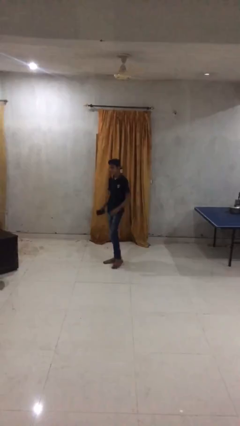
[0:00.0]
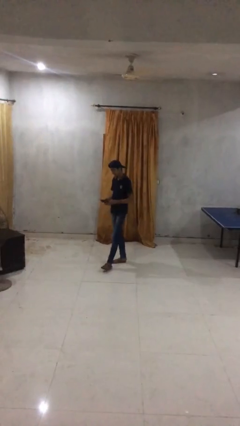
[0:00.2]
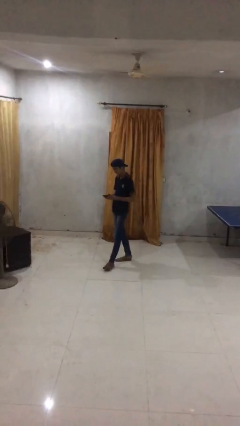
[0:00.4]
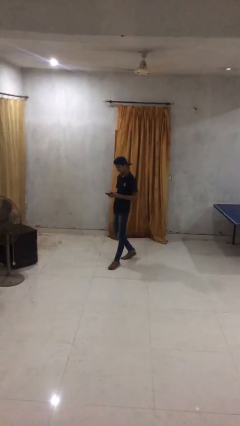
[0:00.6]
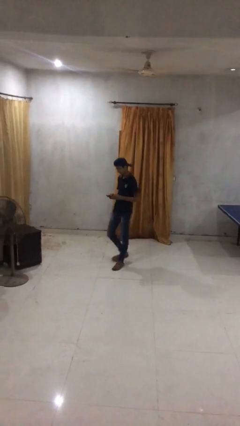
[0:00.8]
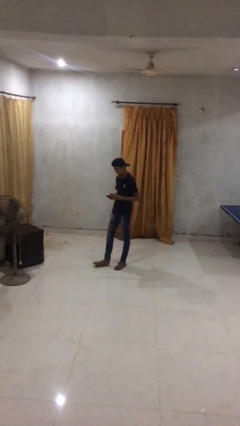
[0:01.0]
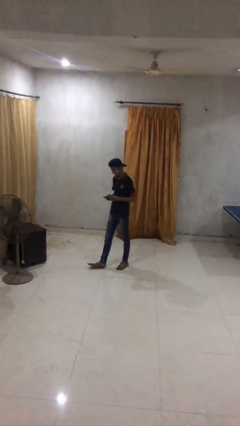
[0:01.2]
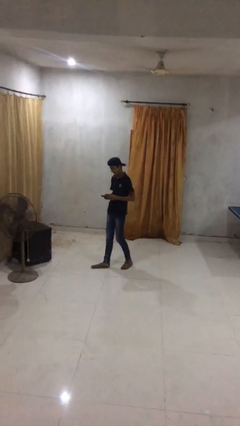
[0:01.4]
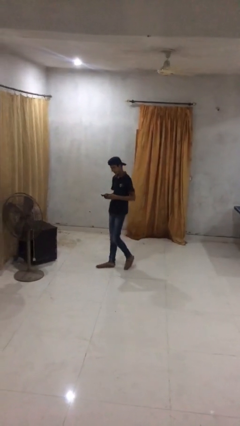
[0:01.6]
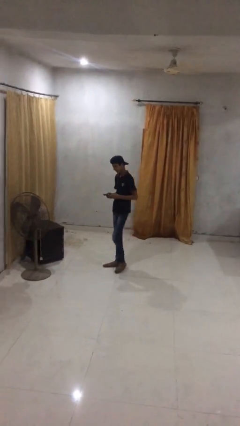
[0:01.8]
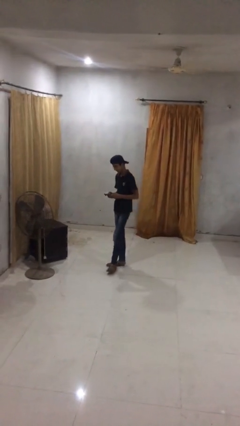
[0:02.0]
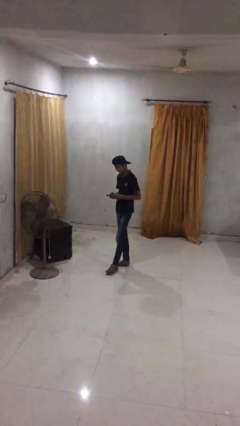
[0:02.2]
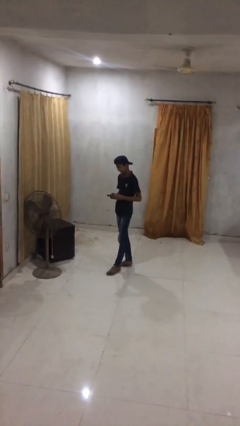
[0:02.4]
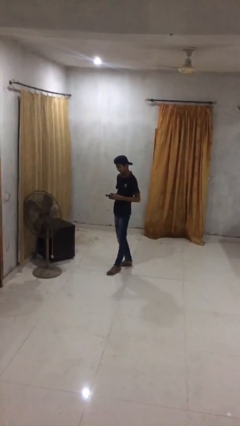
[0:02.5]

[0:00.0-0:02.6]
person texts on phone

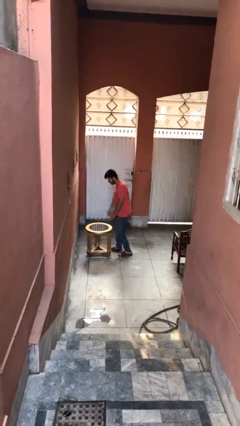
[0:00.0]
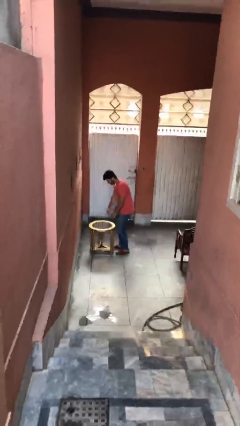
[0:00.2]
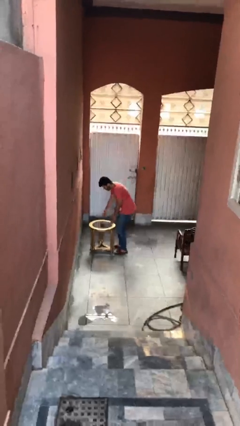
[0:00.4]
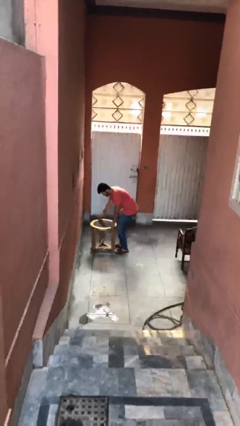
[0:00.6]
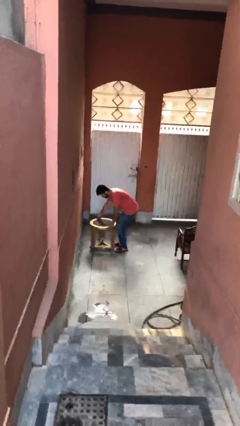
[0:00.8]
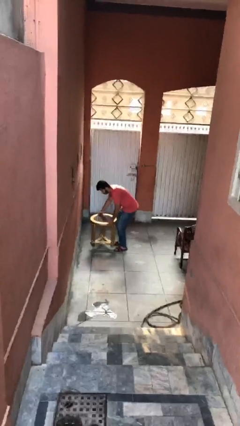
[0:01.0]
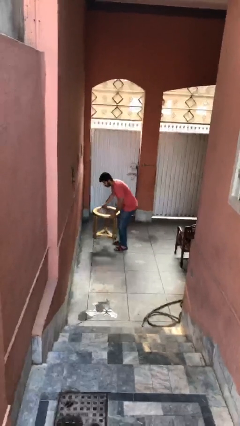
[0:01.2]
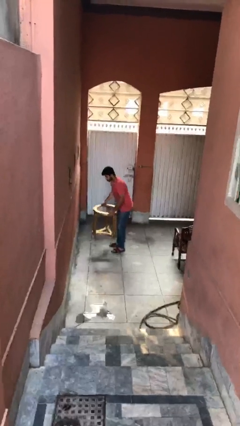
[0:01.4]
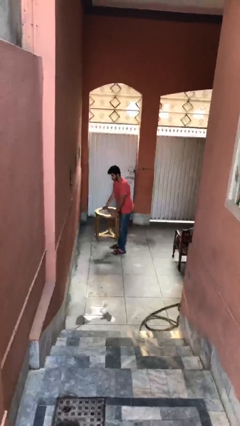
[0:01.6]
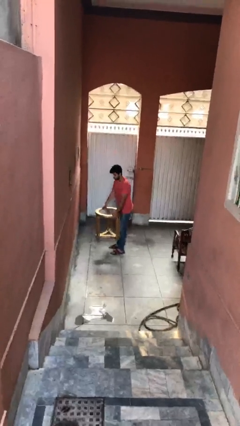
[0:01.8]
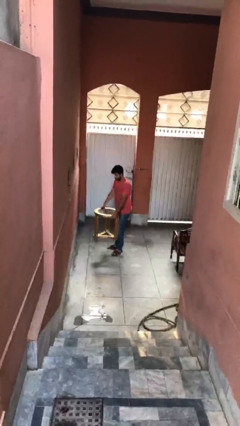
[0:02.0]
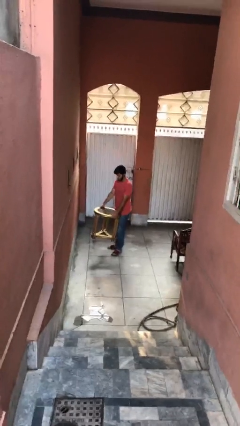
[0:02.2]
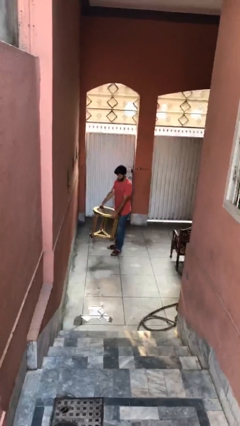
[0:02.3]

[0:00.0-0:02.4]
person picks up object from floor

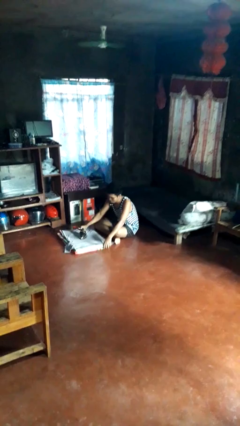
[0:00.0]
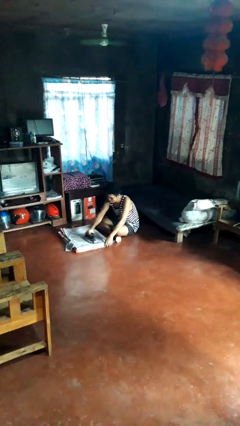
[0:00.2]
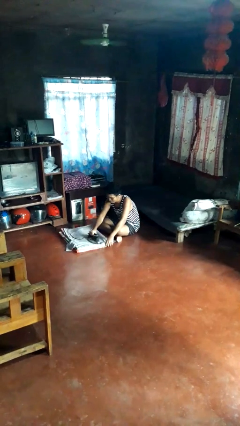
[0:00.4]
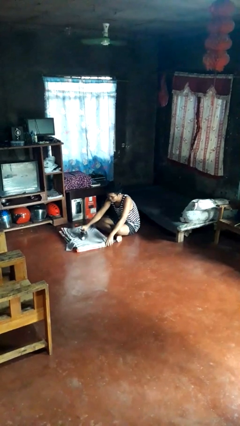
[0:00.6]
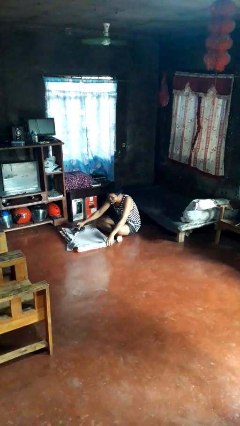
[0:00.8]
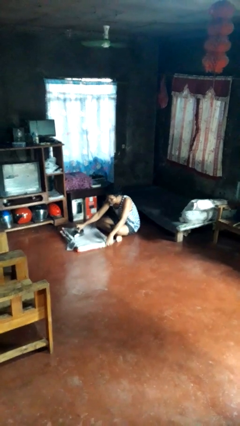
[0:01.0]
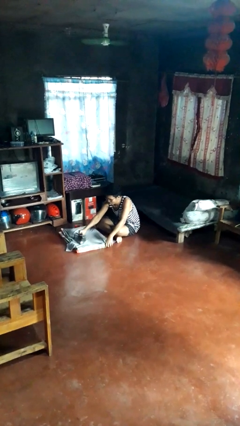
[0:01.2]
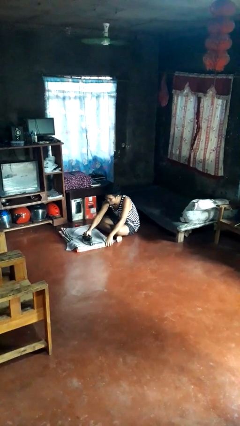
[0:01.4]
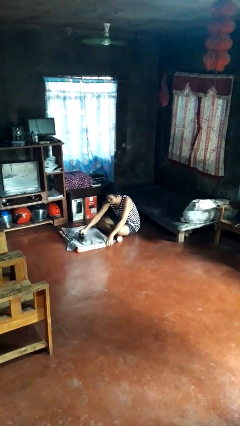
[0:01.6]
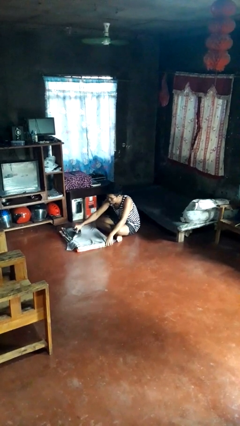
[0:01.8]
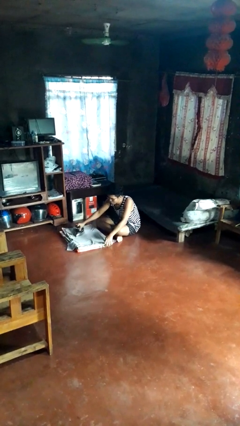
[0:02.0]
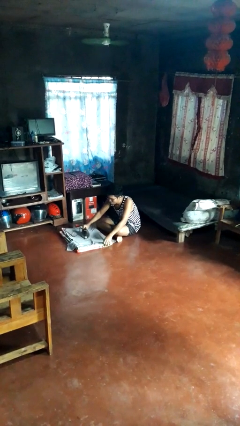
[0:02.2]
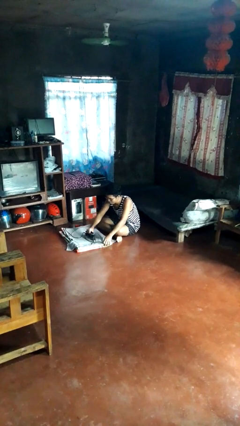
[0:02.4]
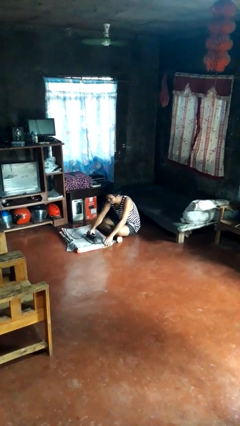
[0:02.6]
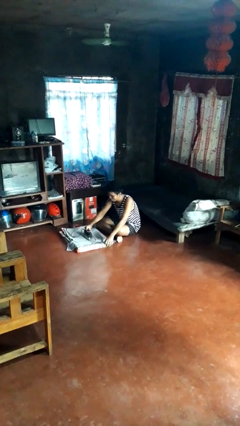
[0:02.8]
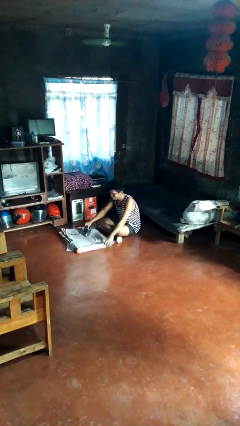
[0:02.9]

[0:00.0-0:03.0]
person irons clothes

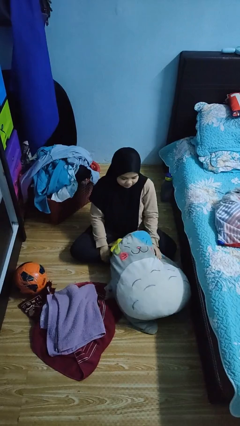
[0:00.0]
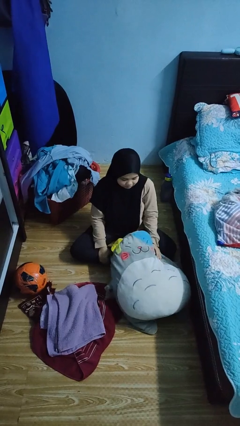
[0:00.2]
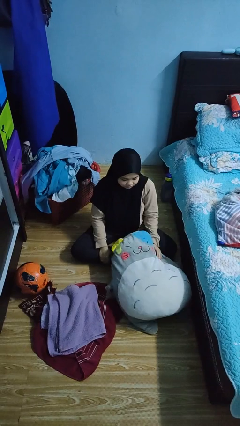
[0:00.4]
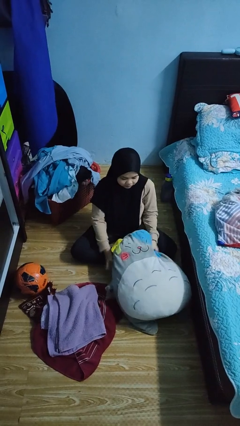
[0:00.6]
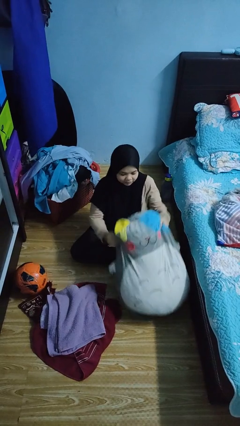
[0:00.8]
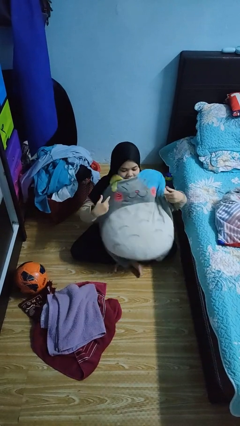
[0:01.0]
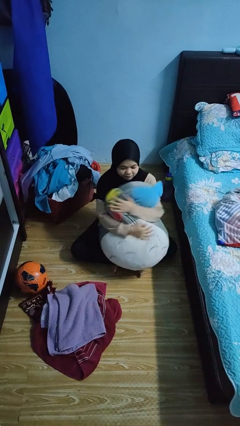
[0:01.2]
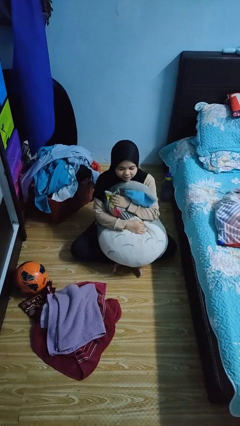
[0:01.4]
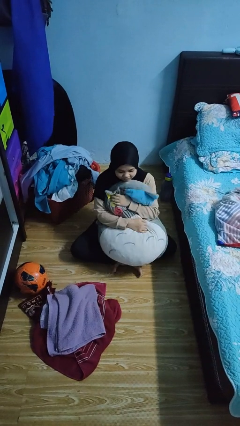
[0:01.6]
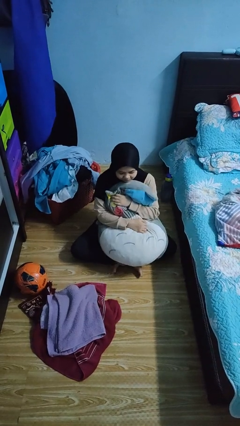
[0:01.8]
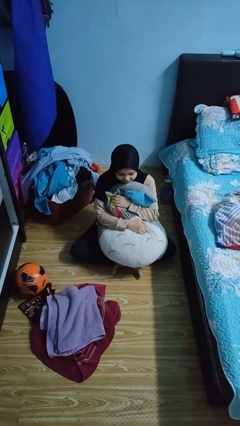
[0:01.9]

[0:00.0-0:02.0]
person hugs stuffed animal

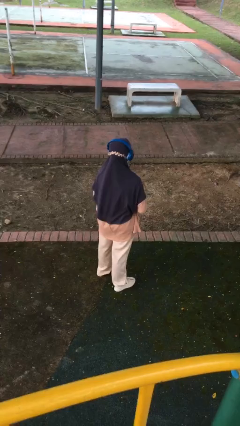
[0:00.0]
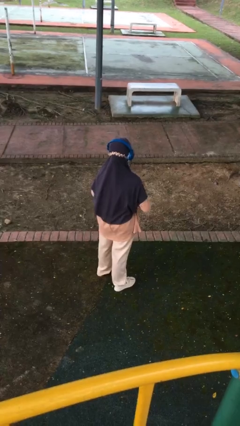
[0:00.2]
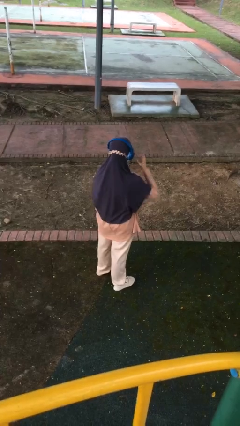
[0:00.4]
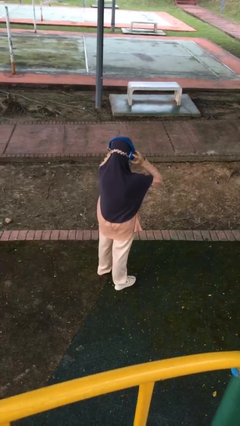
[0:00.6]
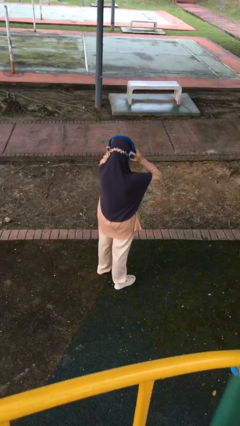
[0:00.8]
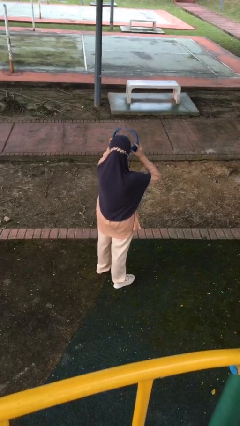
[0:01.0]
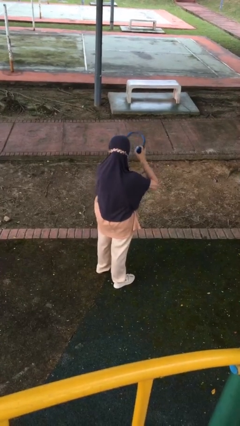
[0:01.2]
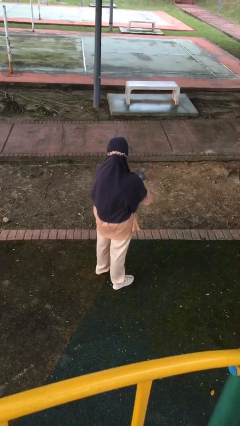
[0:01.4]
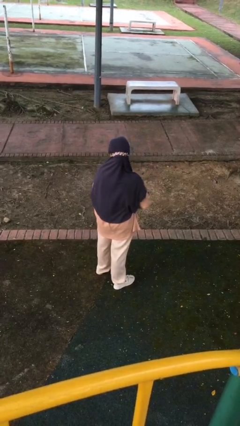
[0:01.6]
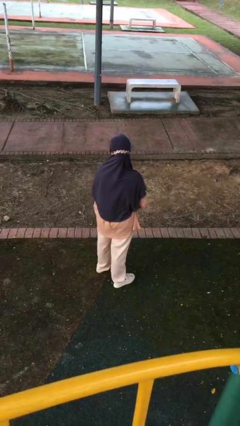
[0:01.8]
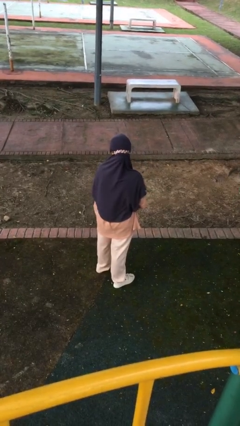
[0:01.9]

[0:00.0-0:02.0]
person takes off headphones

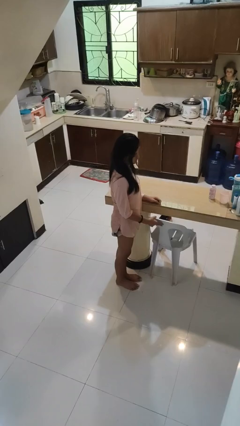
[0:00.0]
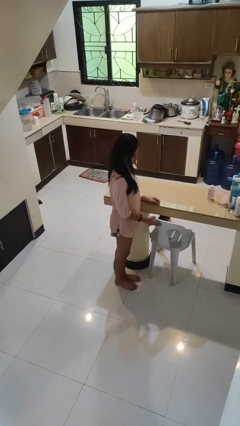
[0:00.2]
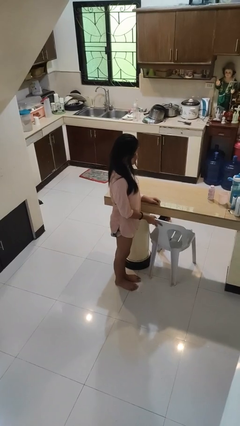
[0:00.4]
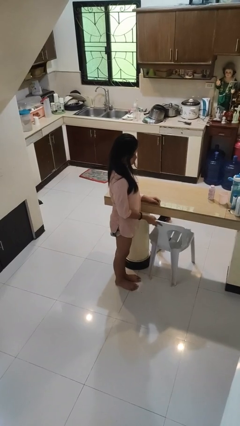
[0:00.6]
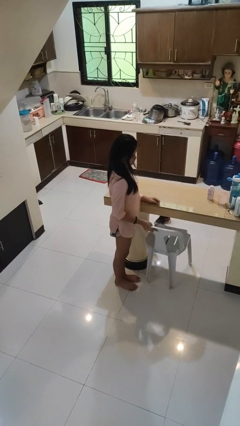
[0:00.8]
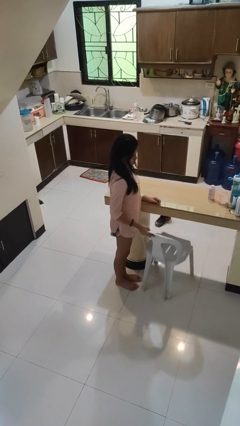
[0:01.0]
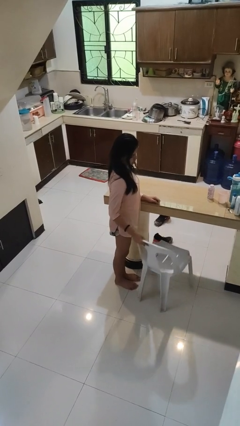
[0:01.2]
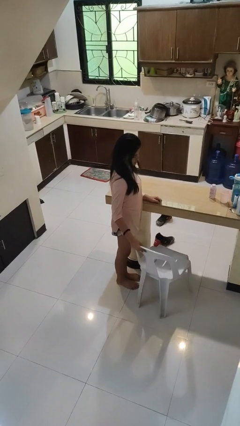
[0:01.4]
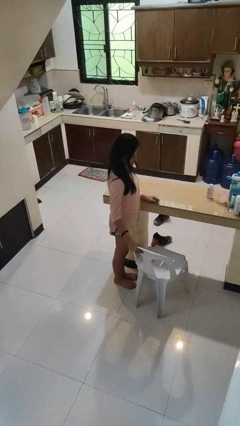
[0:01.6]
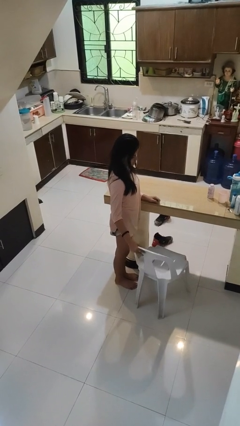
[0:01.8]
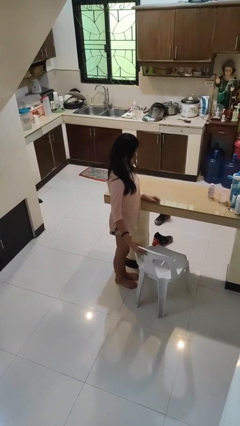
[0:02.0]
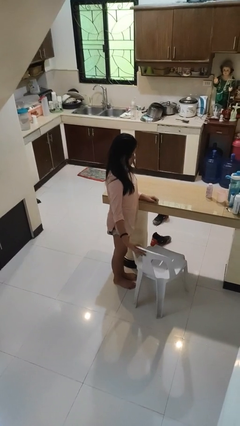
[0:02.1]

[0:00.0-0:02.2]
person pulls out chair

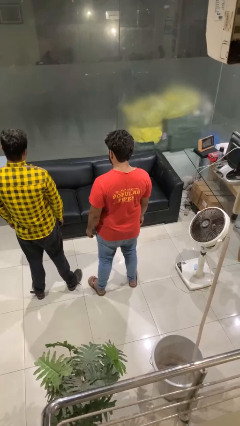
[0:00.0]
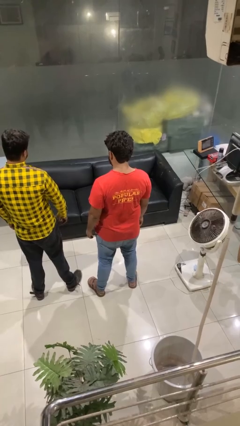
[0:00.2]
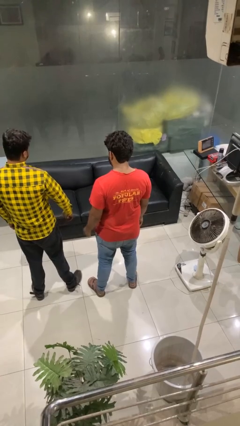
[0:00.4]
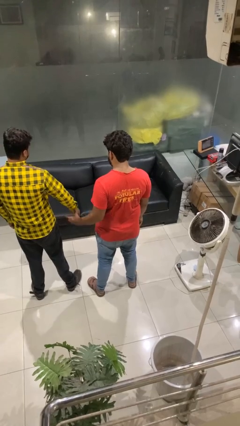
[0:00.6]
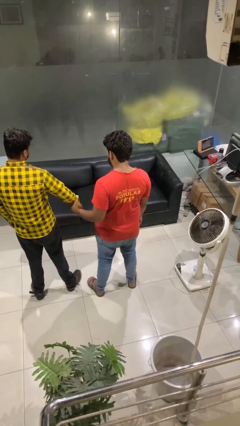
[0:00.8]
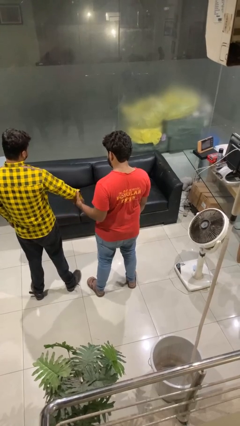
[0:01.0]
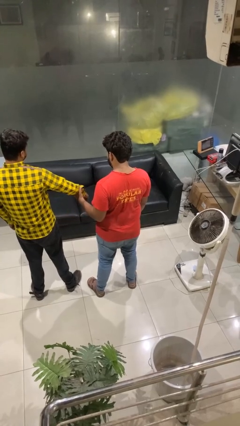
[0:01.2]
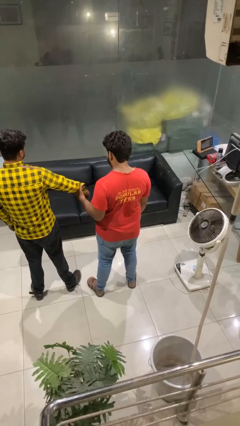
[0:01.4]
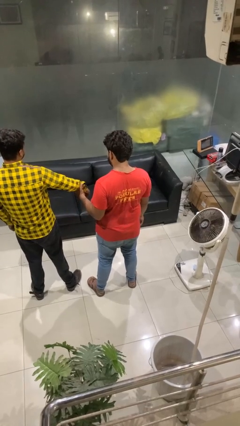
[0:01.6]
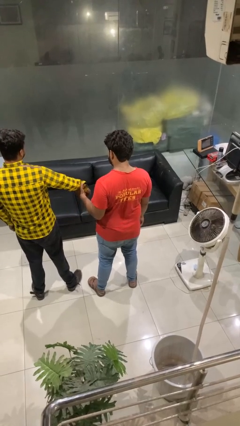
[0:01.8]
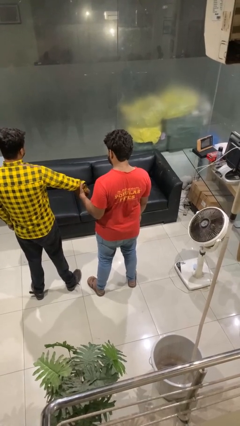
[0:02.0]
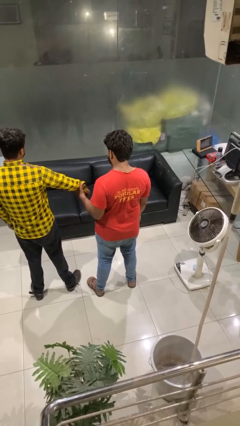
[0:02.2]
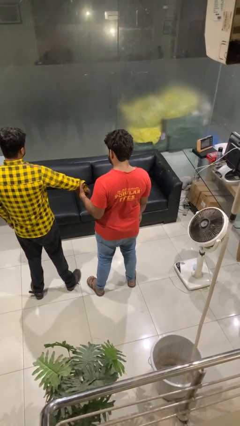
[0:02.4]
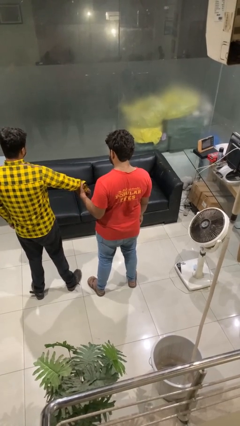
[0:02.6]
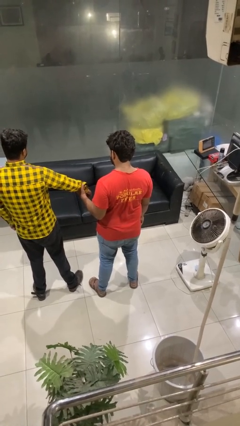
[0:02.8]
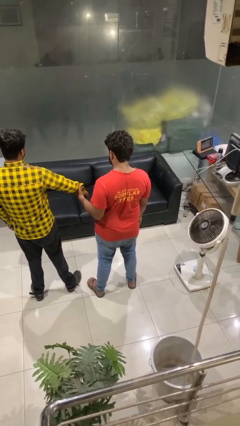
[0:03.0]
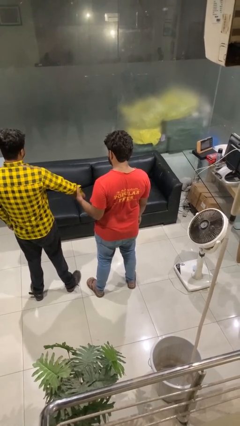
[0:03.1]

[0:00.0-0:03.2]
person grabs person by forearm
